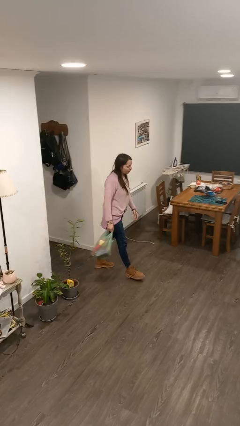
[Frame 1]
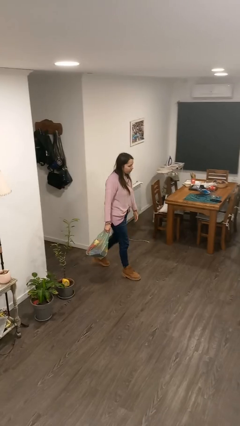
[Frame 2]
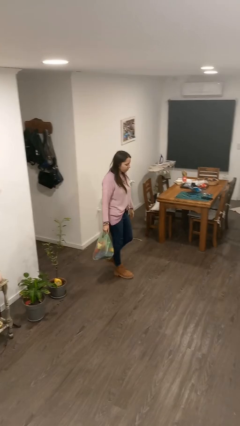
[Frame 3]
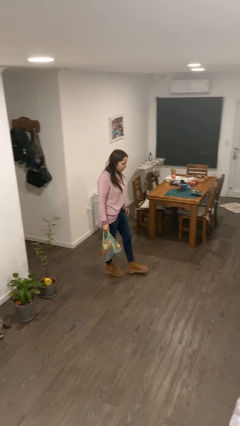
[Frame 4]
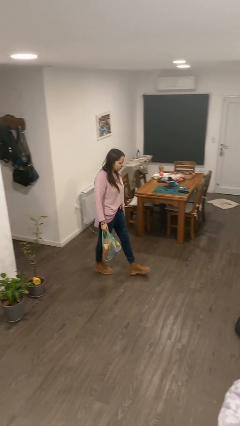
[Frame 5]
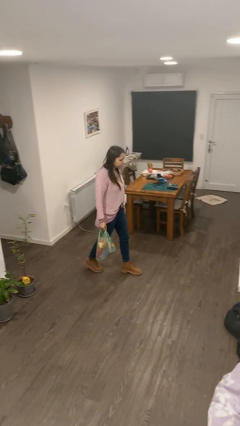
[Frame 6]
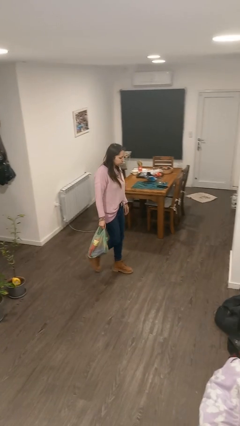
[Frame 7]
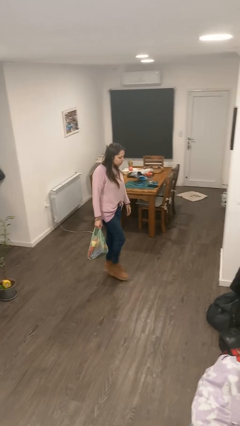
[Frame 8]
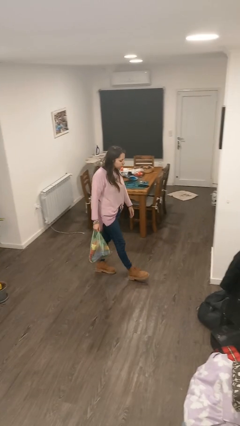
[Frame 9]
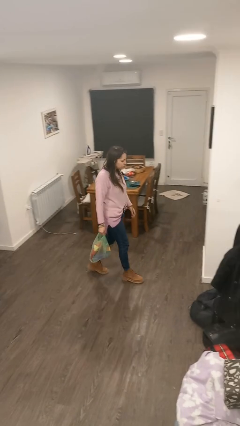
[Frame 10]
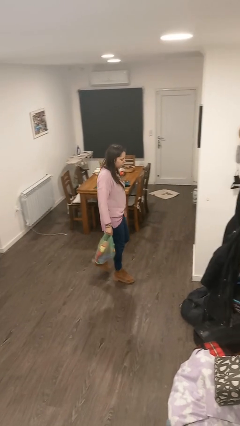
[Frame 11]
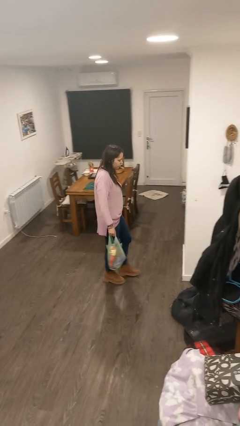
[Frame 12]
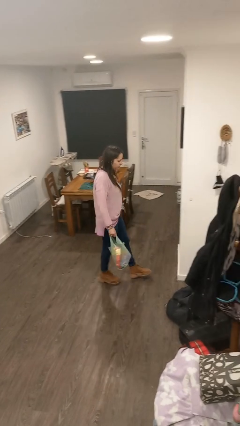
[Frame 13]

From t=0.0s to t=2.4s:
person carries groceries

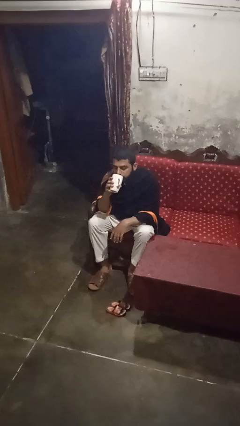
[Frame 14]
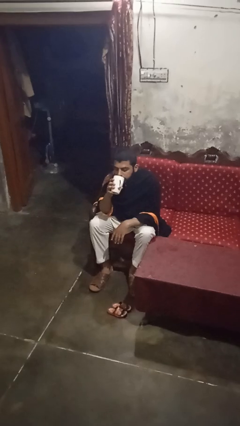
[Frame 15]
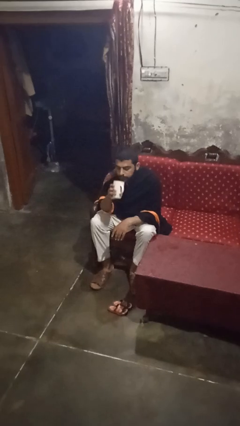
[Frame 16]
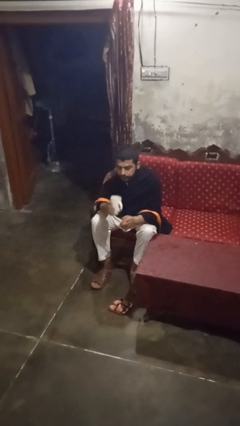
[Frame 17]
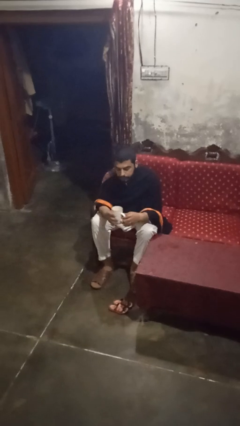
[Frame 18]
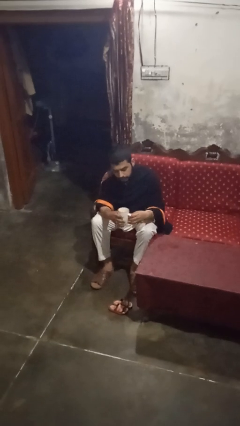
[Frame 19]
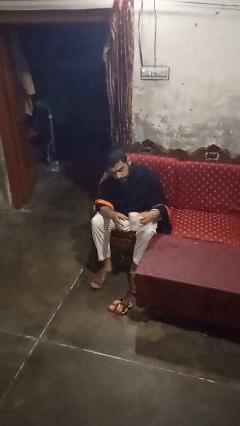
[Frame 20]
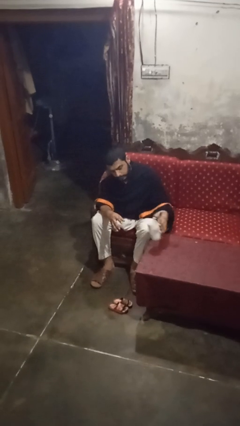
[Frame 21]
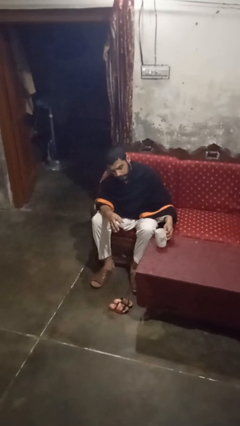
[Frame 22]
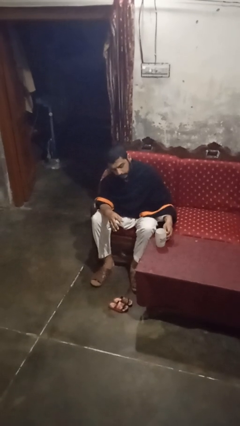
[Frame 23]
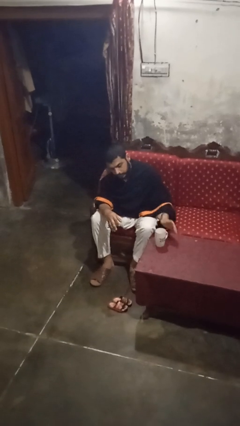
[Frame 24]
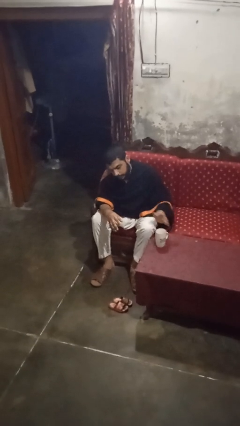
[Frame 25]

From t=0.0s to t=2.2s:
person puts down object on table

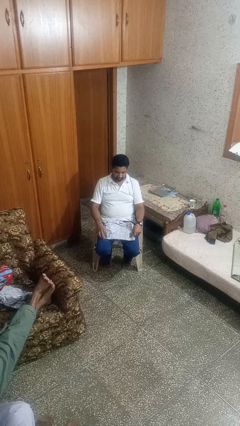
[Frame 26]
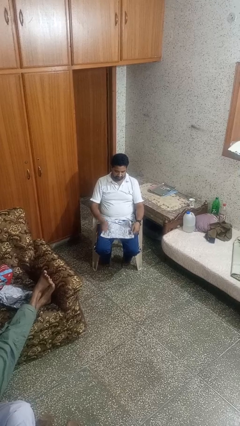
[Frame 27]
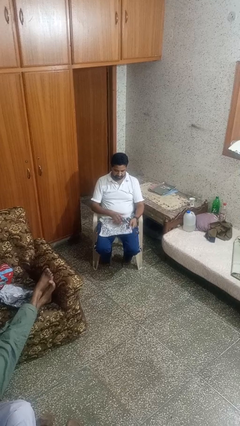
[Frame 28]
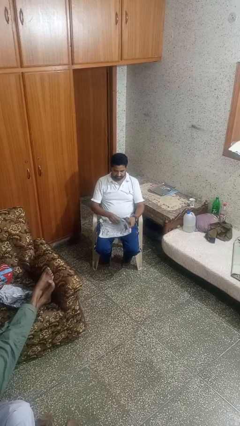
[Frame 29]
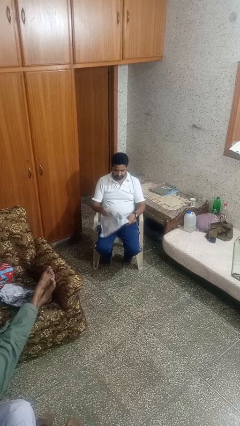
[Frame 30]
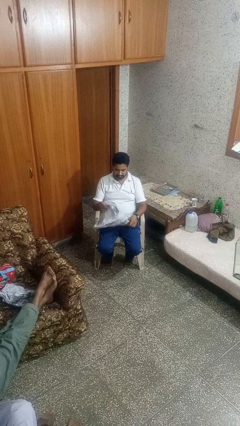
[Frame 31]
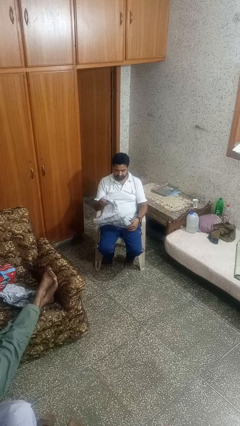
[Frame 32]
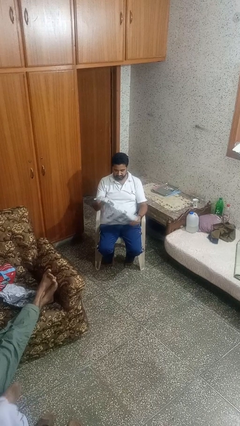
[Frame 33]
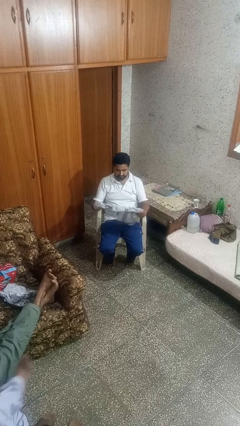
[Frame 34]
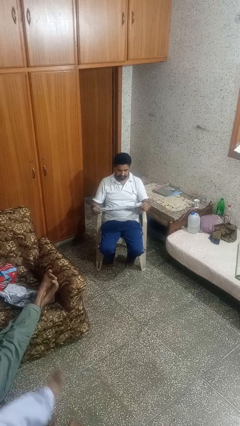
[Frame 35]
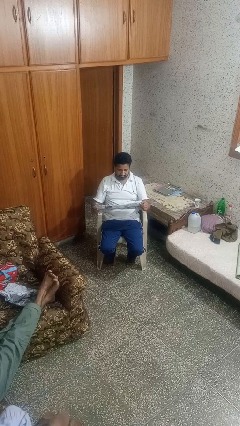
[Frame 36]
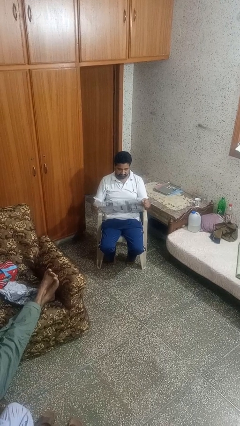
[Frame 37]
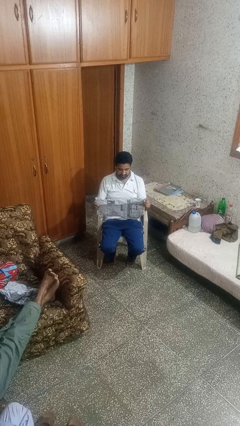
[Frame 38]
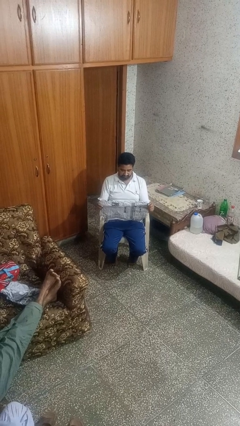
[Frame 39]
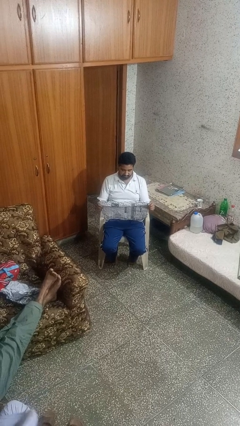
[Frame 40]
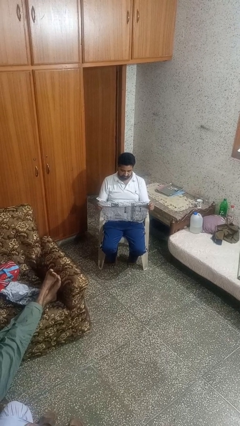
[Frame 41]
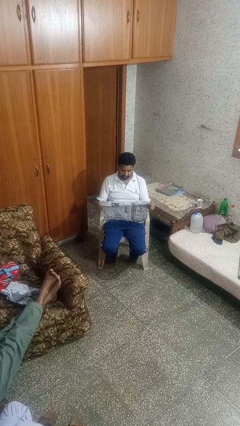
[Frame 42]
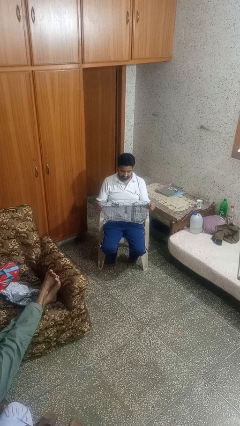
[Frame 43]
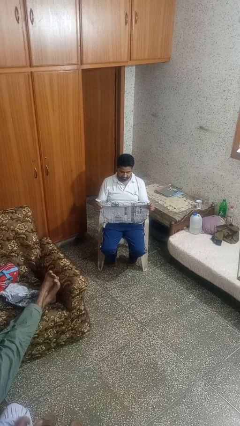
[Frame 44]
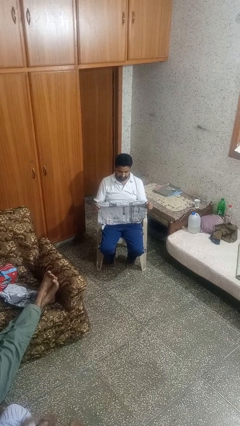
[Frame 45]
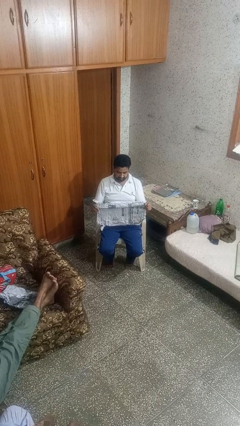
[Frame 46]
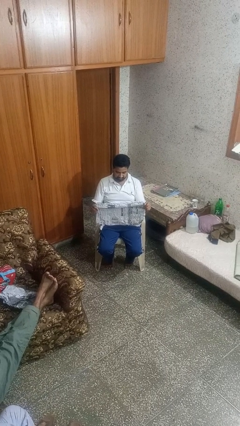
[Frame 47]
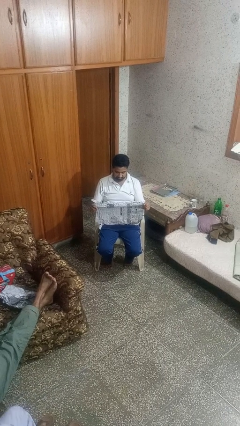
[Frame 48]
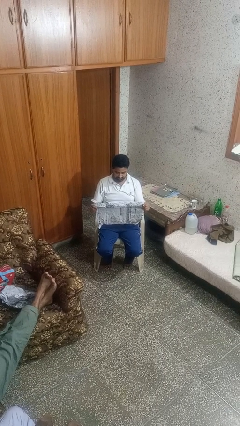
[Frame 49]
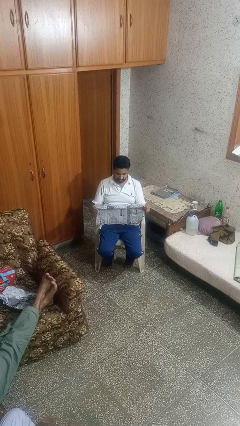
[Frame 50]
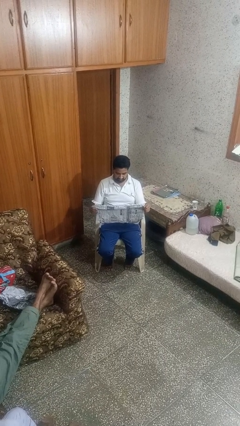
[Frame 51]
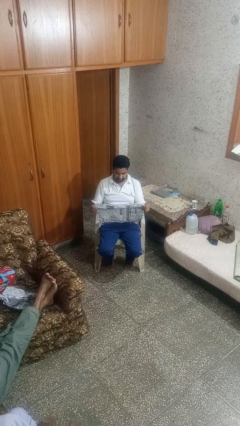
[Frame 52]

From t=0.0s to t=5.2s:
person reads newspaper

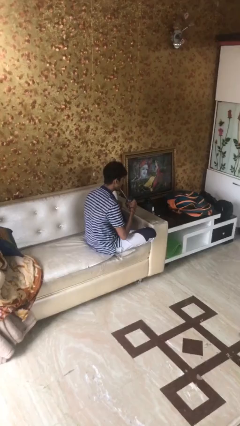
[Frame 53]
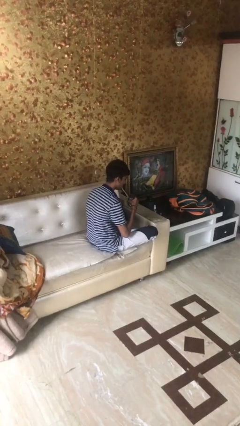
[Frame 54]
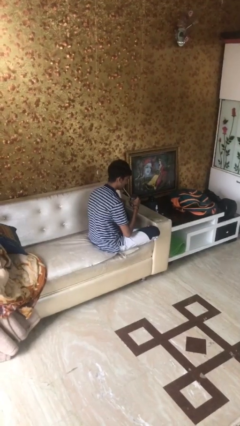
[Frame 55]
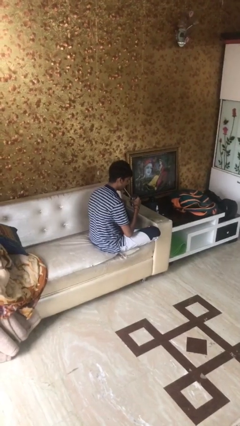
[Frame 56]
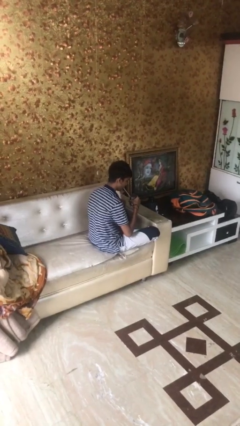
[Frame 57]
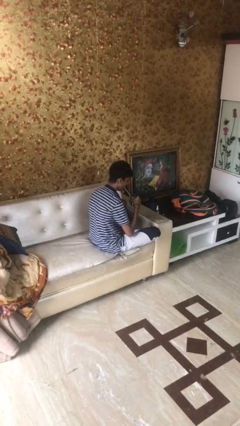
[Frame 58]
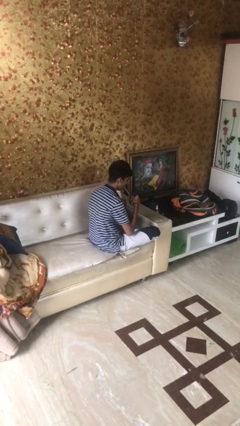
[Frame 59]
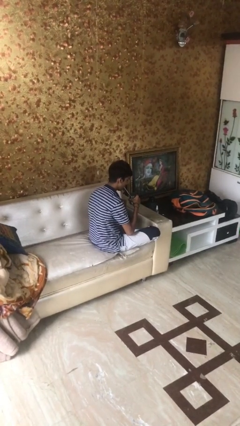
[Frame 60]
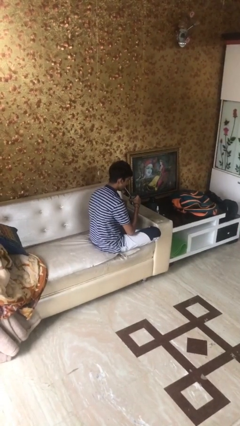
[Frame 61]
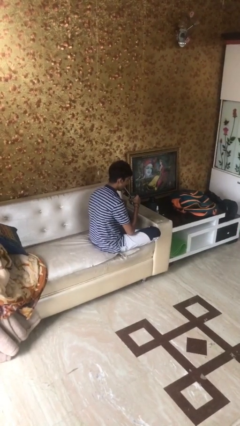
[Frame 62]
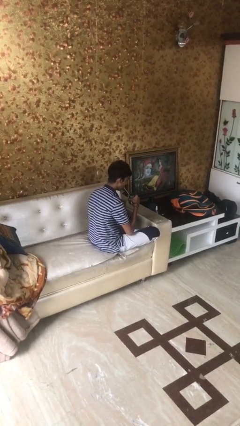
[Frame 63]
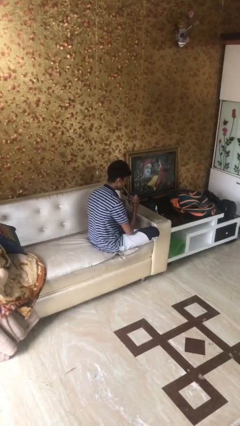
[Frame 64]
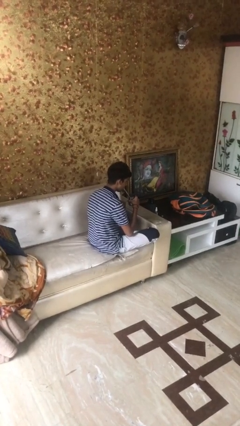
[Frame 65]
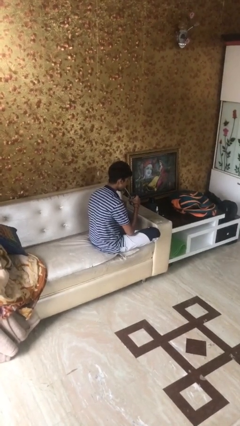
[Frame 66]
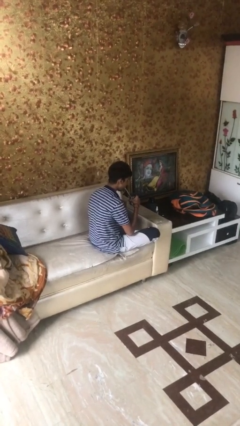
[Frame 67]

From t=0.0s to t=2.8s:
person drinks from straw

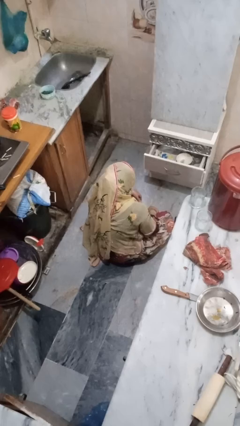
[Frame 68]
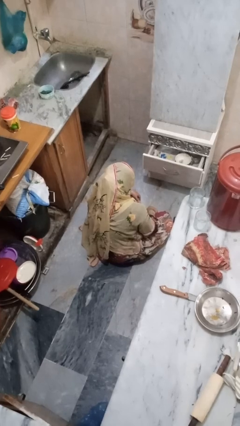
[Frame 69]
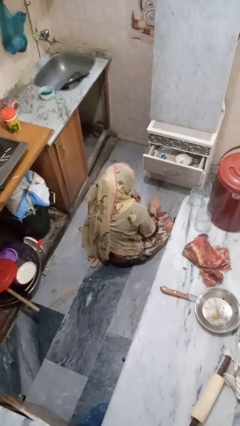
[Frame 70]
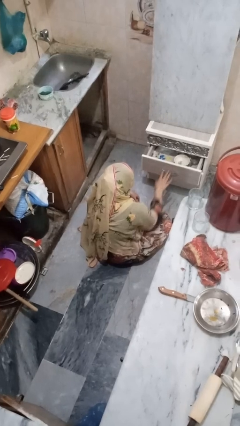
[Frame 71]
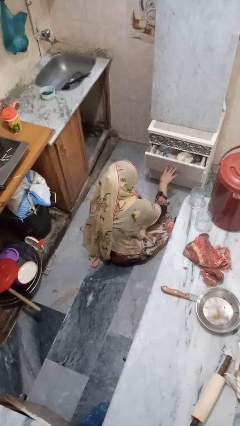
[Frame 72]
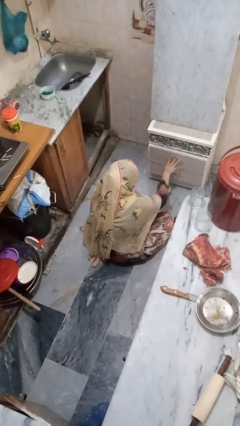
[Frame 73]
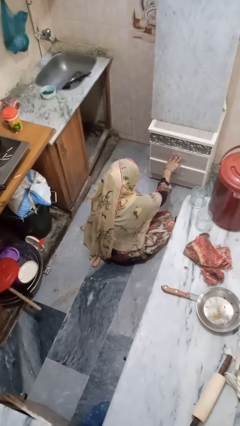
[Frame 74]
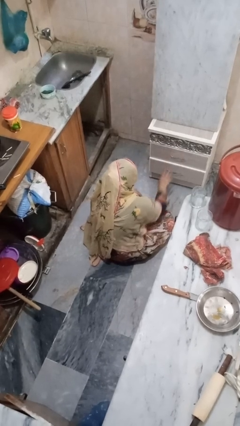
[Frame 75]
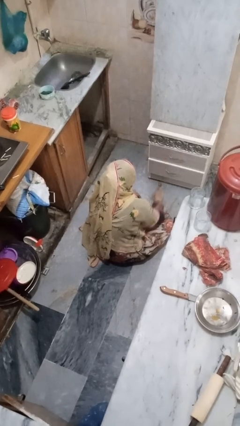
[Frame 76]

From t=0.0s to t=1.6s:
person closes kitchen drawer

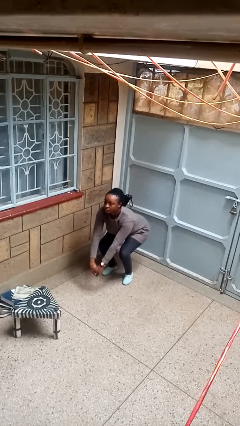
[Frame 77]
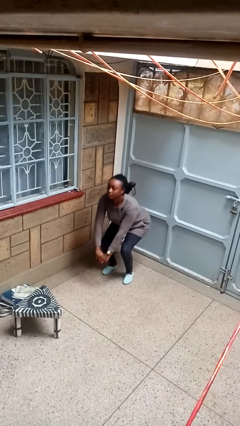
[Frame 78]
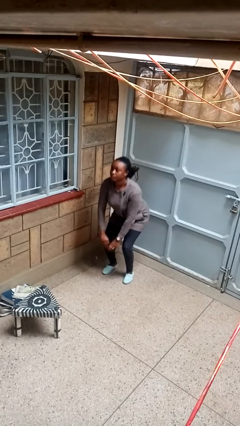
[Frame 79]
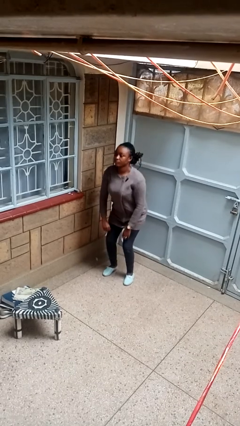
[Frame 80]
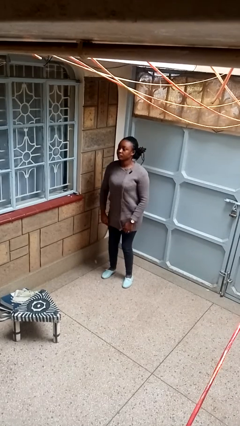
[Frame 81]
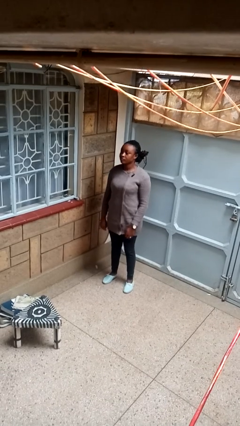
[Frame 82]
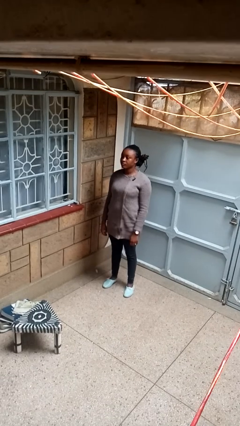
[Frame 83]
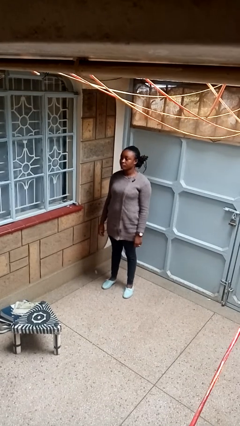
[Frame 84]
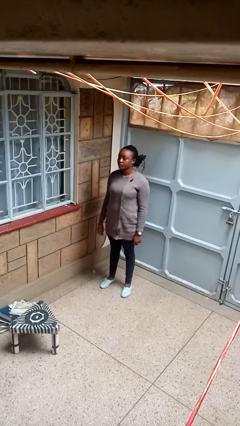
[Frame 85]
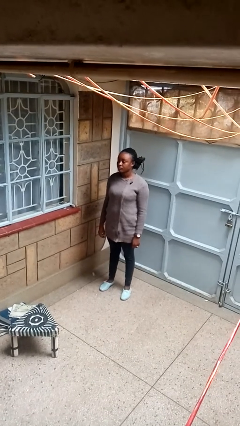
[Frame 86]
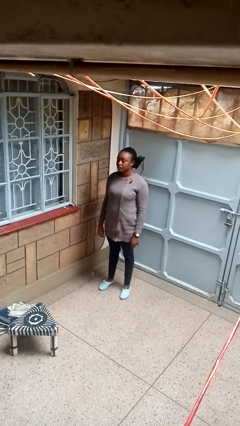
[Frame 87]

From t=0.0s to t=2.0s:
person stands up

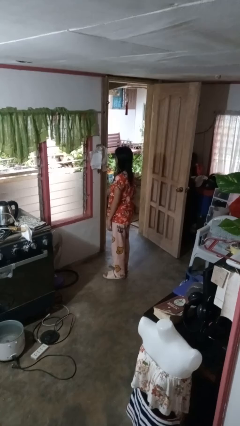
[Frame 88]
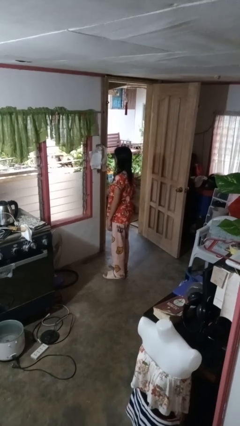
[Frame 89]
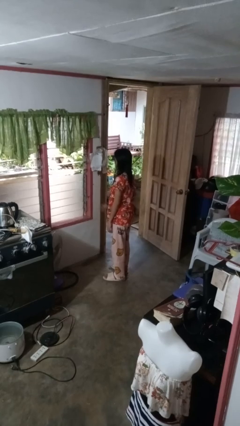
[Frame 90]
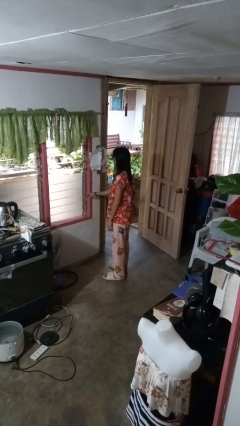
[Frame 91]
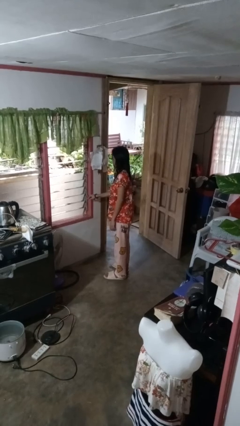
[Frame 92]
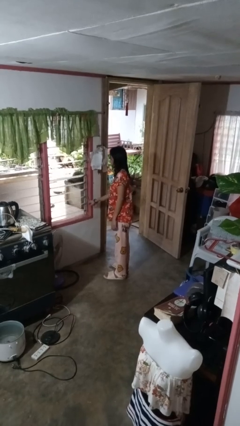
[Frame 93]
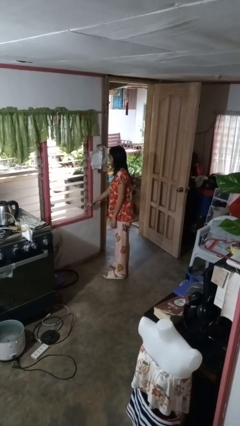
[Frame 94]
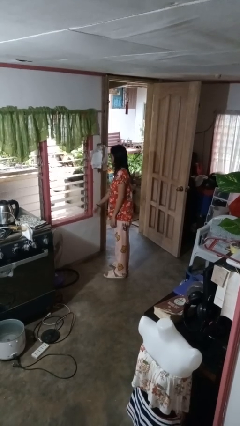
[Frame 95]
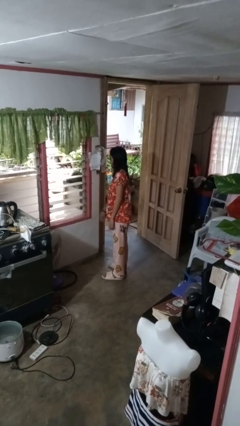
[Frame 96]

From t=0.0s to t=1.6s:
person opens home window
